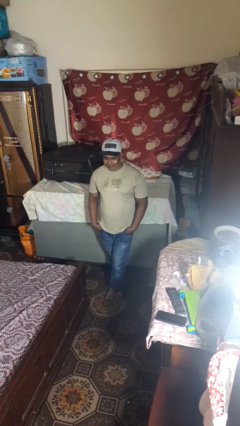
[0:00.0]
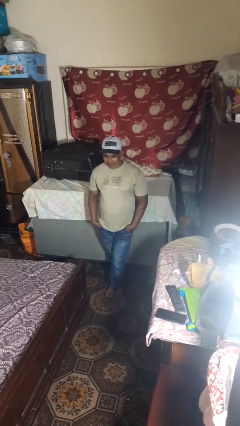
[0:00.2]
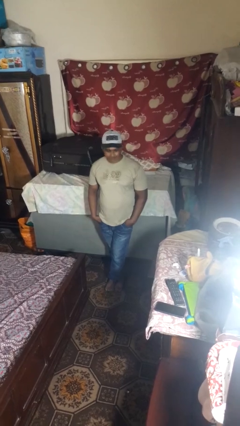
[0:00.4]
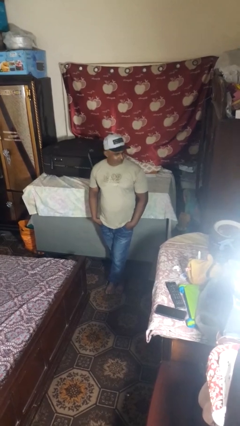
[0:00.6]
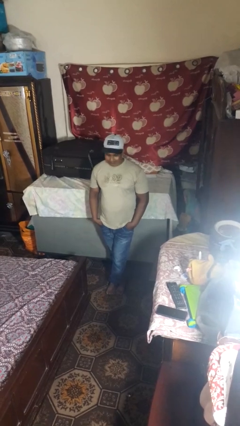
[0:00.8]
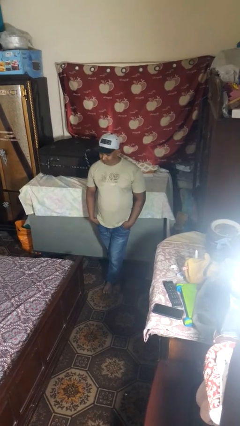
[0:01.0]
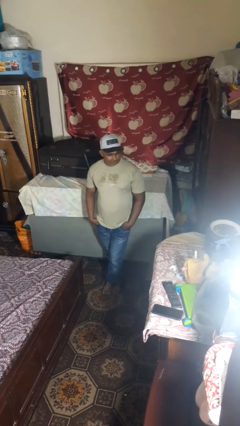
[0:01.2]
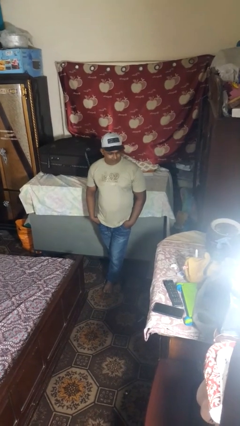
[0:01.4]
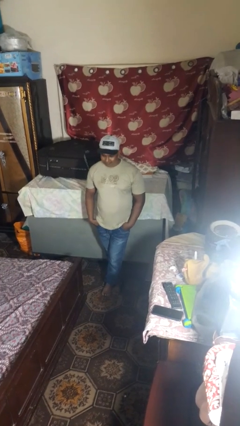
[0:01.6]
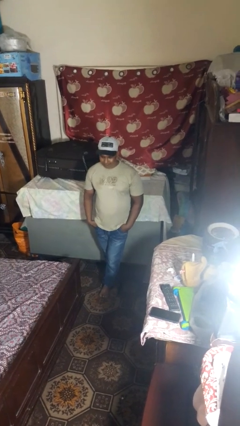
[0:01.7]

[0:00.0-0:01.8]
person shakes head

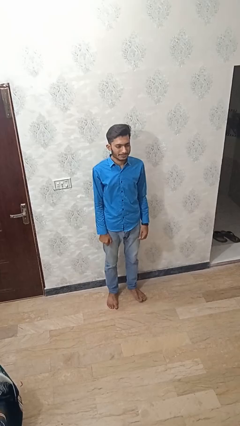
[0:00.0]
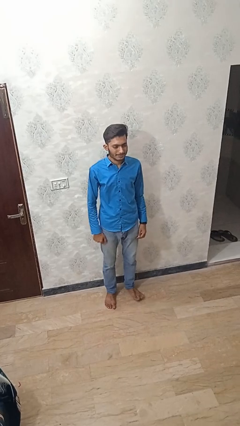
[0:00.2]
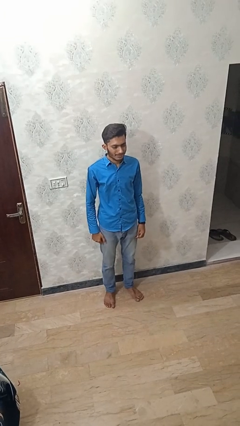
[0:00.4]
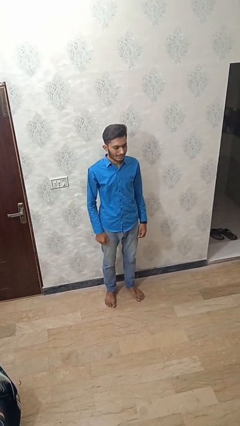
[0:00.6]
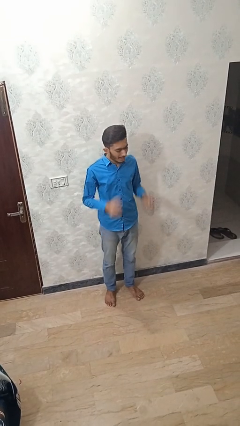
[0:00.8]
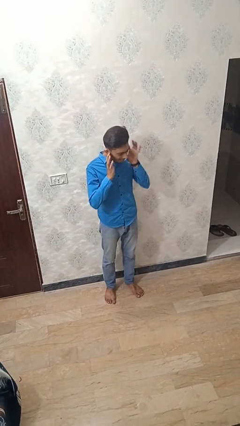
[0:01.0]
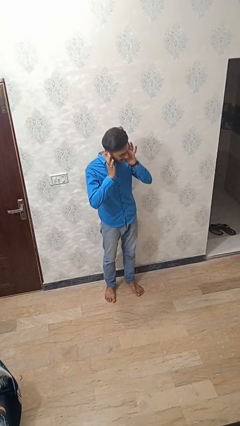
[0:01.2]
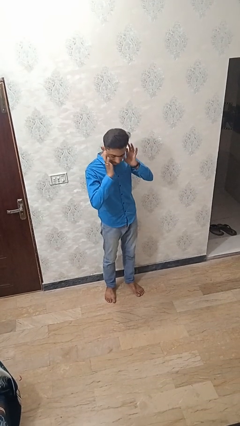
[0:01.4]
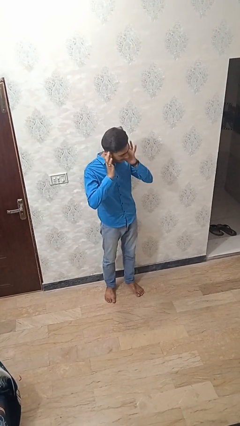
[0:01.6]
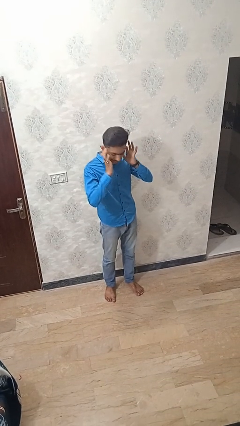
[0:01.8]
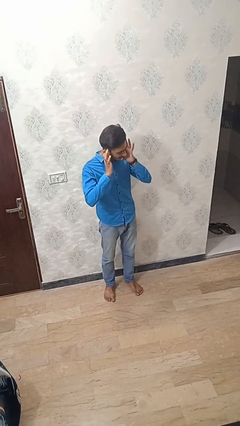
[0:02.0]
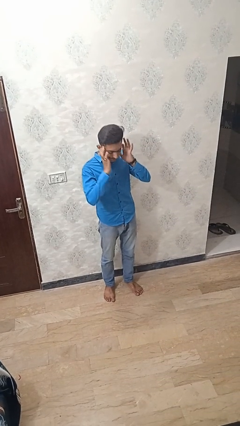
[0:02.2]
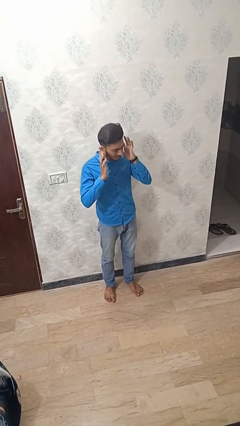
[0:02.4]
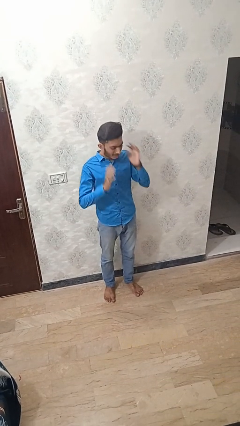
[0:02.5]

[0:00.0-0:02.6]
person puts fingers in ear

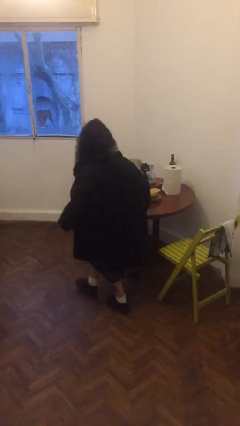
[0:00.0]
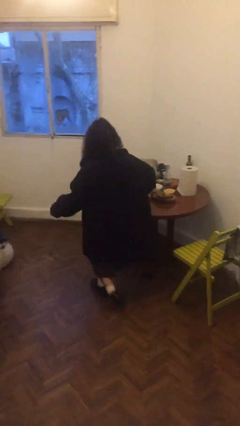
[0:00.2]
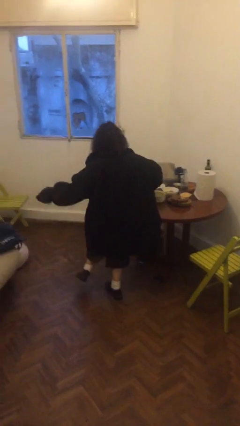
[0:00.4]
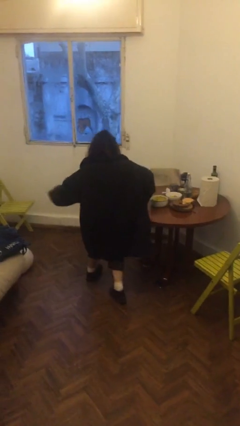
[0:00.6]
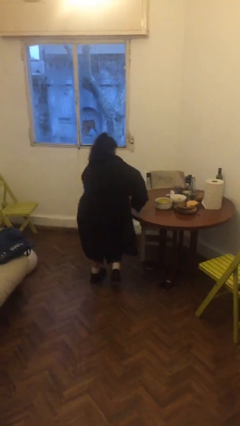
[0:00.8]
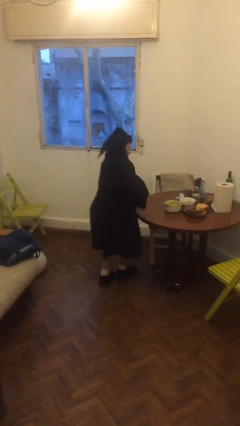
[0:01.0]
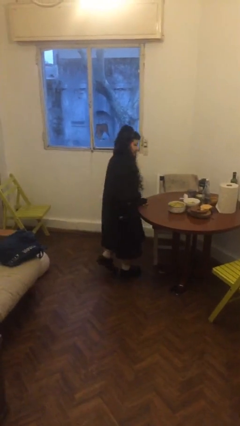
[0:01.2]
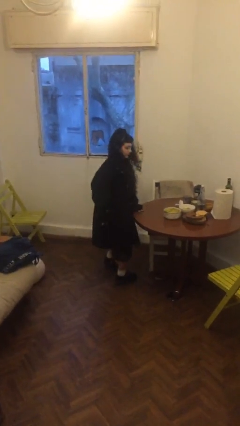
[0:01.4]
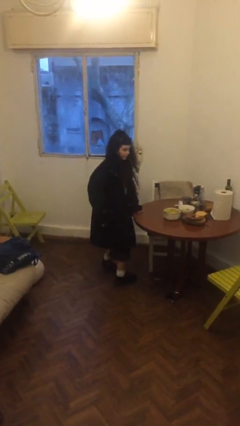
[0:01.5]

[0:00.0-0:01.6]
person bumps into table

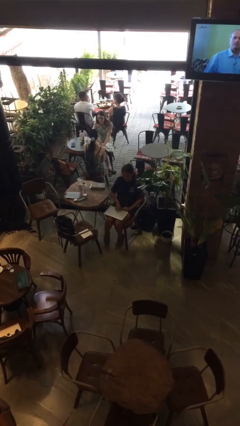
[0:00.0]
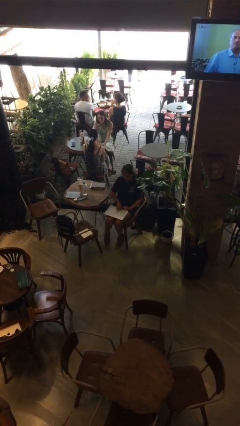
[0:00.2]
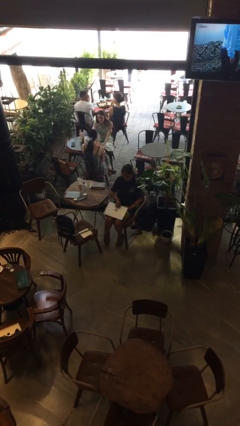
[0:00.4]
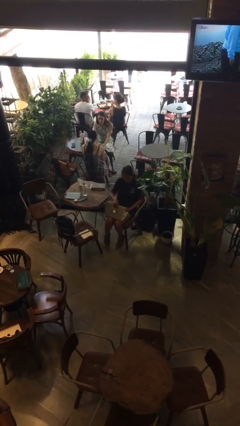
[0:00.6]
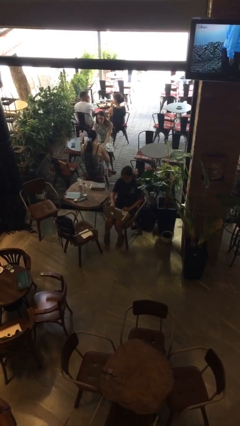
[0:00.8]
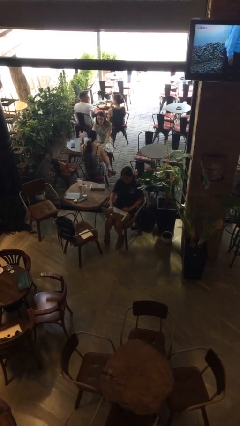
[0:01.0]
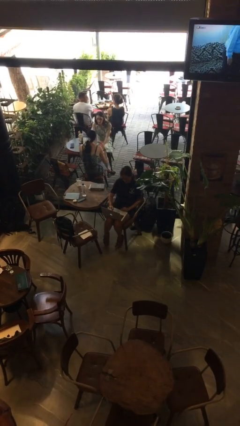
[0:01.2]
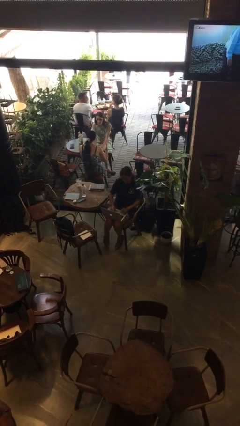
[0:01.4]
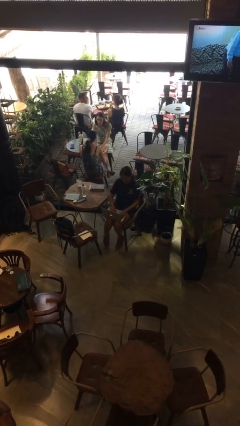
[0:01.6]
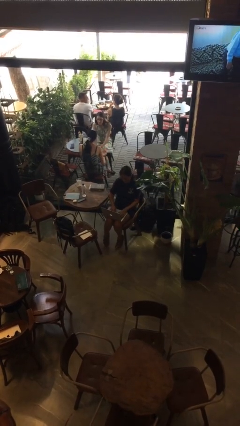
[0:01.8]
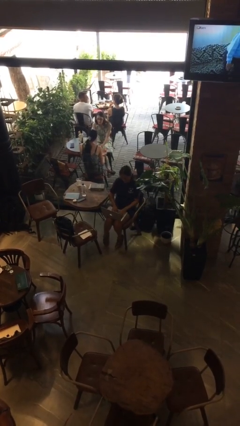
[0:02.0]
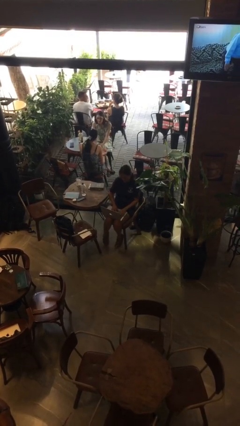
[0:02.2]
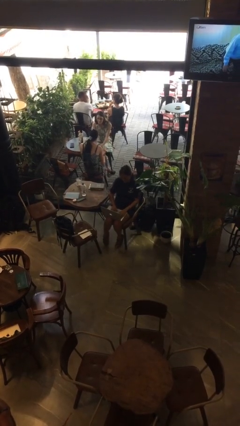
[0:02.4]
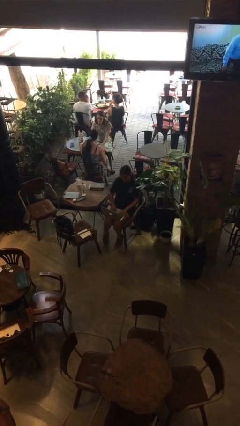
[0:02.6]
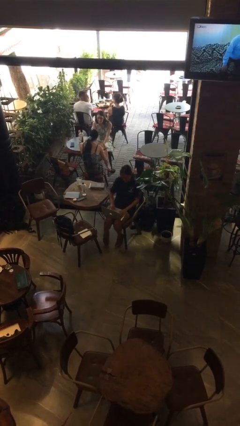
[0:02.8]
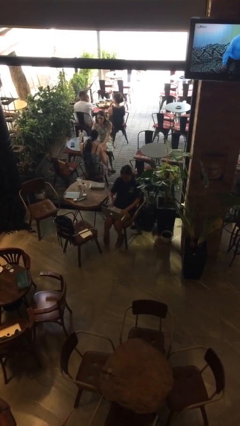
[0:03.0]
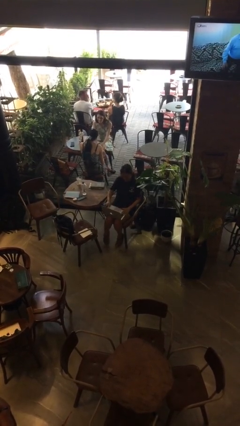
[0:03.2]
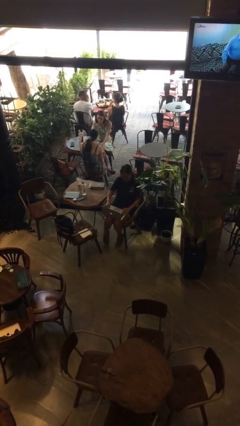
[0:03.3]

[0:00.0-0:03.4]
person opens laptop

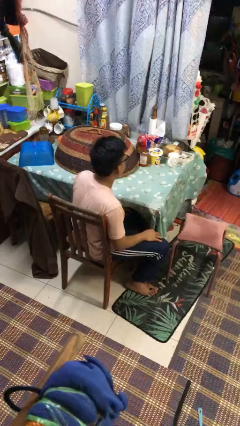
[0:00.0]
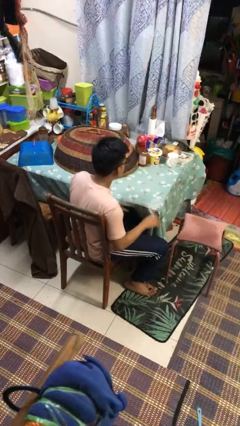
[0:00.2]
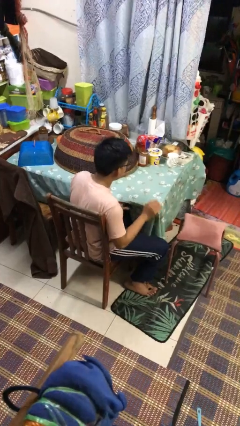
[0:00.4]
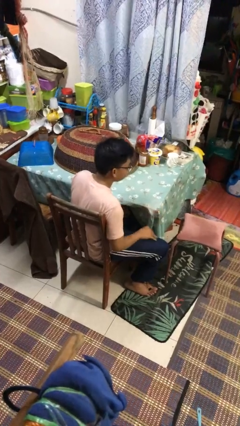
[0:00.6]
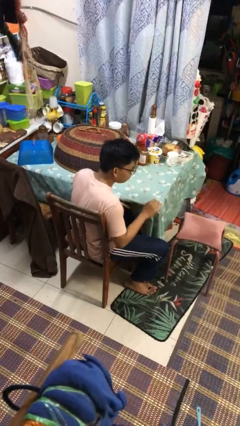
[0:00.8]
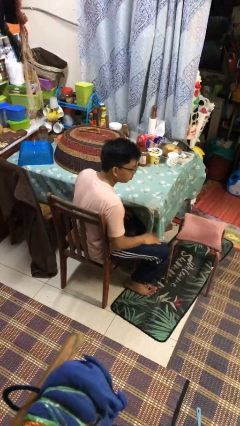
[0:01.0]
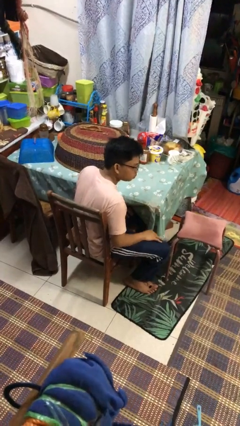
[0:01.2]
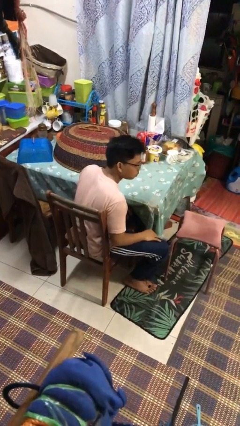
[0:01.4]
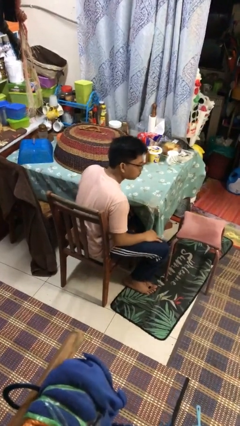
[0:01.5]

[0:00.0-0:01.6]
person slaps hands on thighs

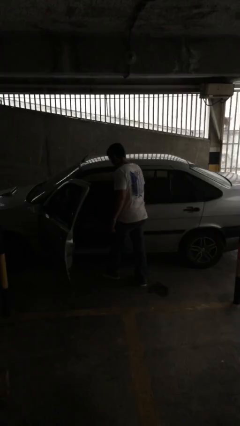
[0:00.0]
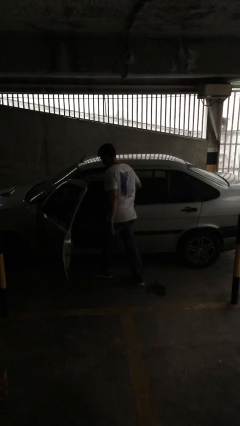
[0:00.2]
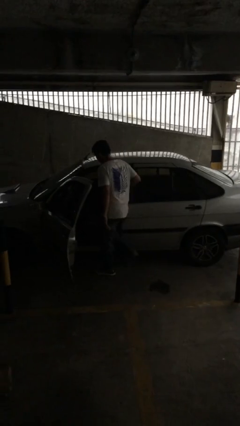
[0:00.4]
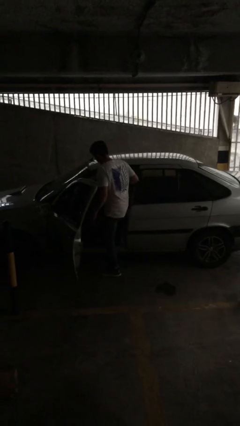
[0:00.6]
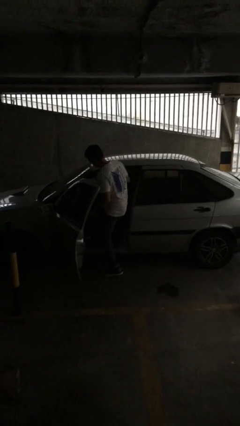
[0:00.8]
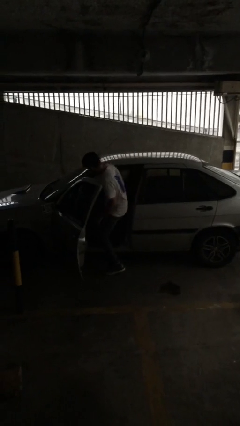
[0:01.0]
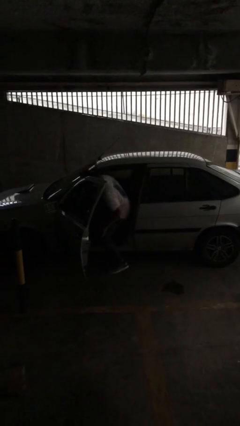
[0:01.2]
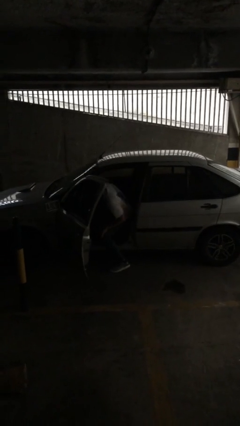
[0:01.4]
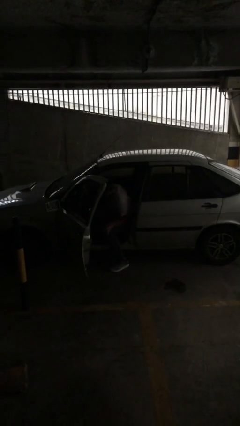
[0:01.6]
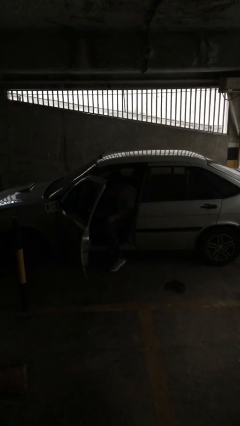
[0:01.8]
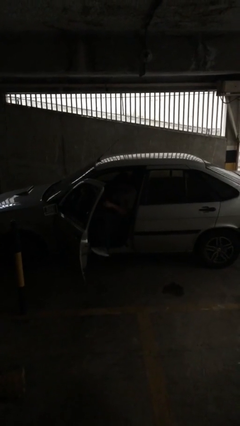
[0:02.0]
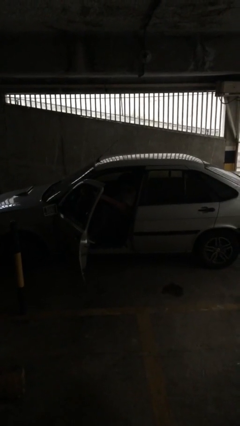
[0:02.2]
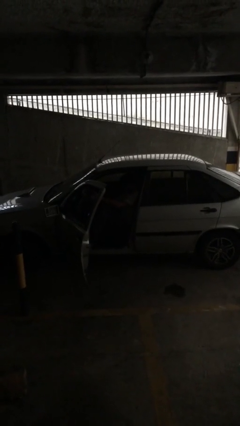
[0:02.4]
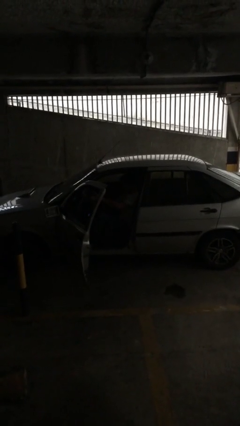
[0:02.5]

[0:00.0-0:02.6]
person enters car

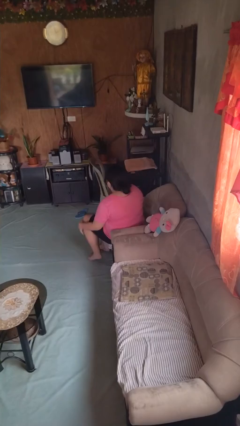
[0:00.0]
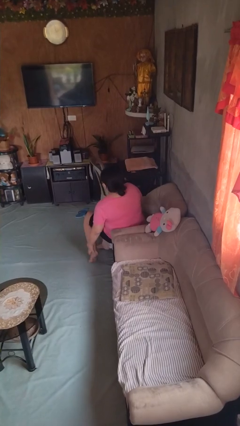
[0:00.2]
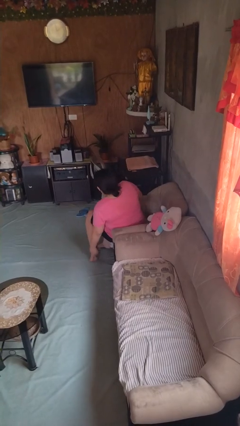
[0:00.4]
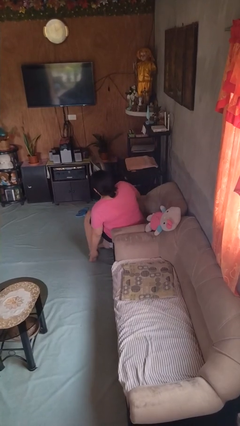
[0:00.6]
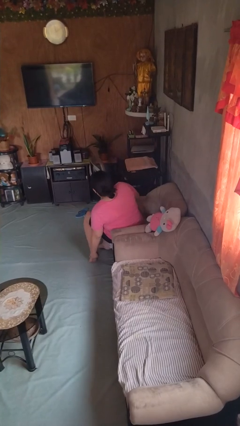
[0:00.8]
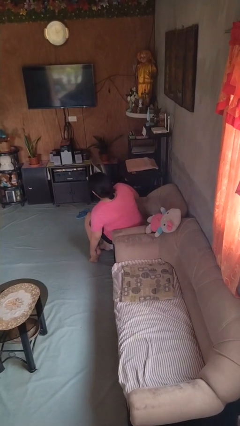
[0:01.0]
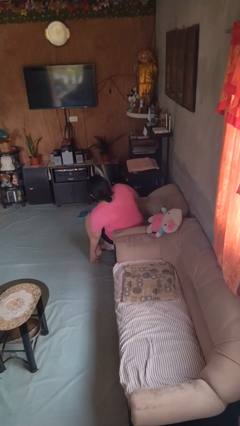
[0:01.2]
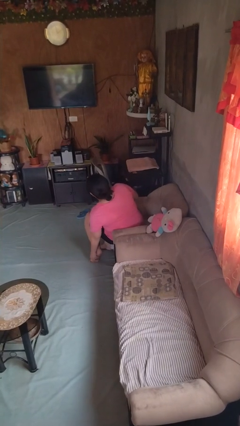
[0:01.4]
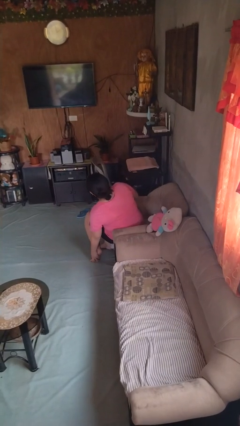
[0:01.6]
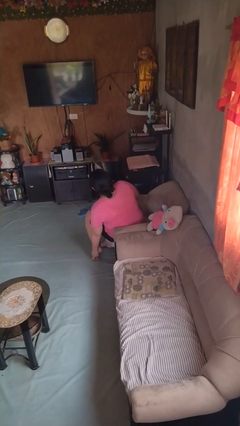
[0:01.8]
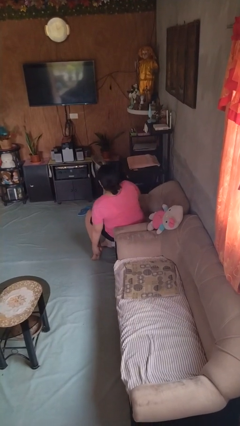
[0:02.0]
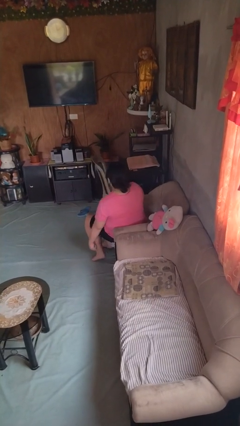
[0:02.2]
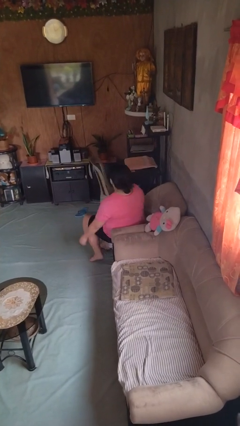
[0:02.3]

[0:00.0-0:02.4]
person rubs foot

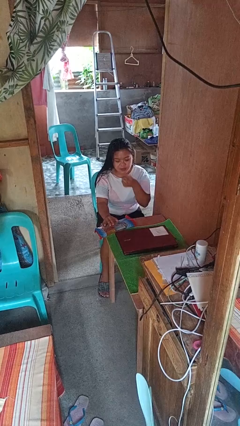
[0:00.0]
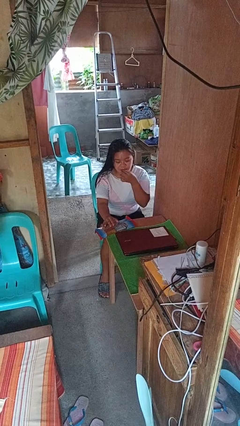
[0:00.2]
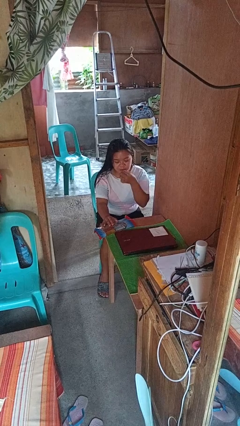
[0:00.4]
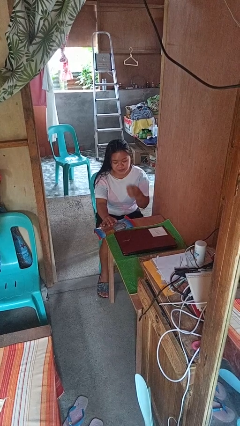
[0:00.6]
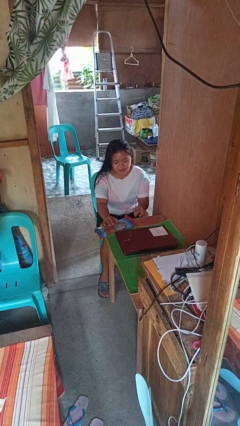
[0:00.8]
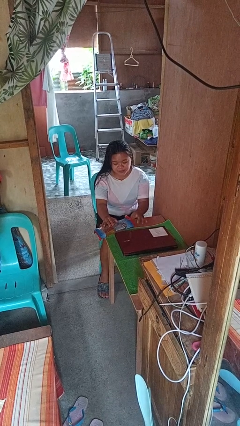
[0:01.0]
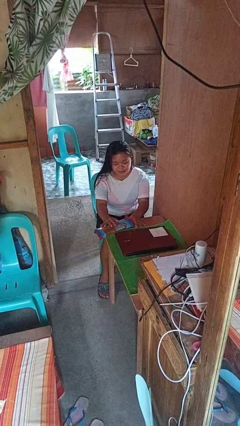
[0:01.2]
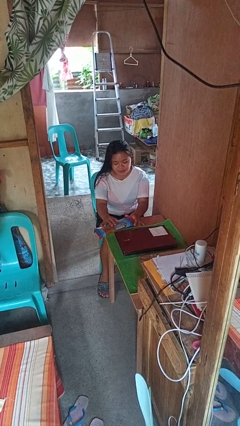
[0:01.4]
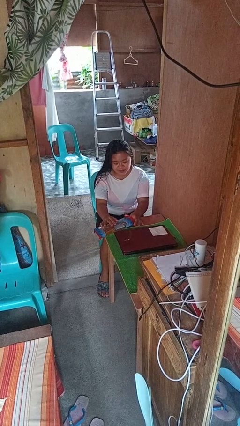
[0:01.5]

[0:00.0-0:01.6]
person eats snack from bag
